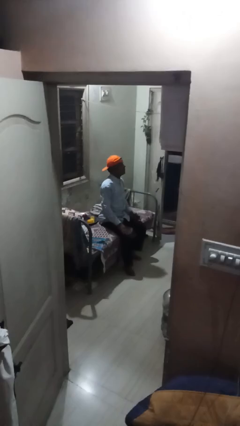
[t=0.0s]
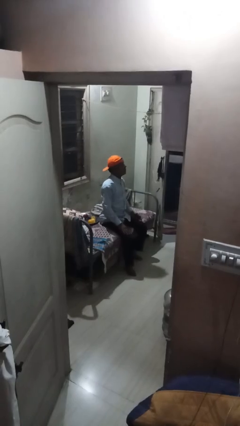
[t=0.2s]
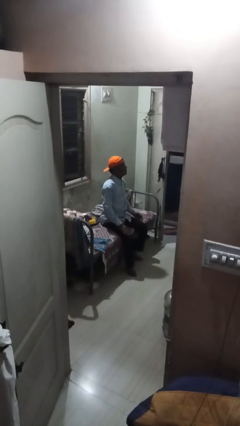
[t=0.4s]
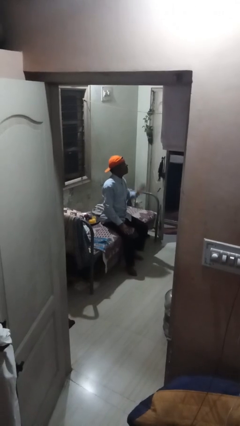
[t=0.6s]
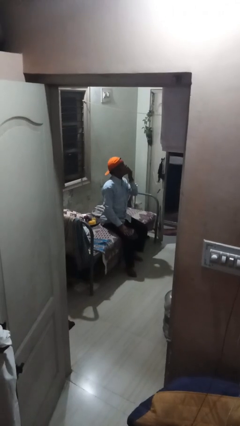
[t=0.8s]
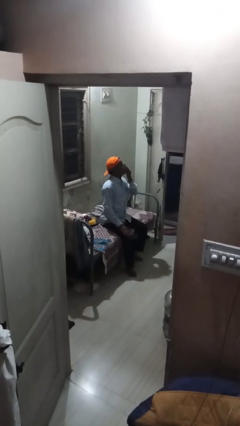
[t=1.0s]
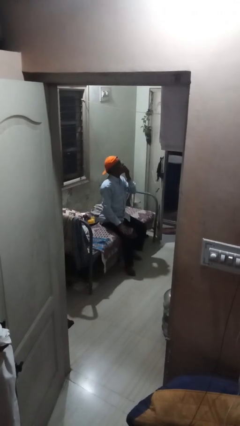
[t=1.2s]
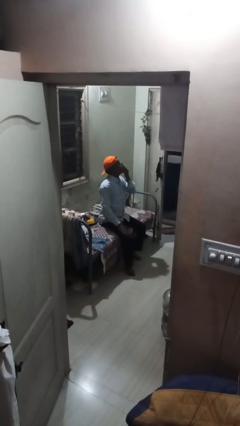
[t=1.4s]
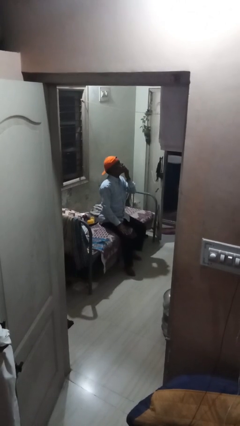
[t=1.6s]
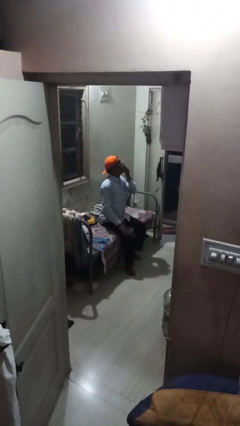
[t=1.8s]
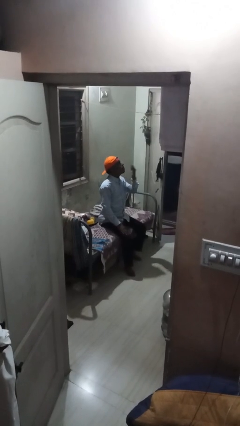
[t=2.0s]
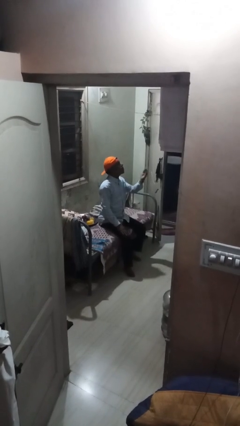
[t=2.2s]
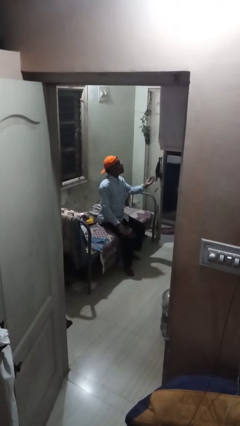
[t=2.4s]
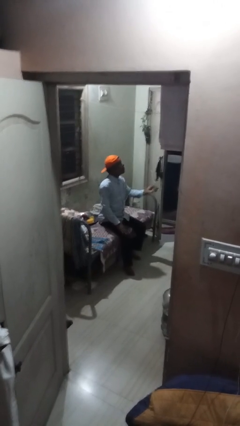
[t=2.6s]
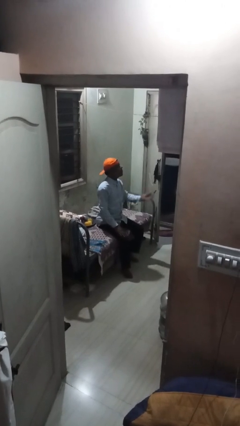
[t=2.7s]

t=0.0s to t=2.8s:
person gestures blow kiss

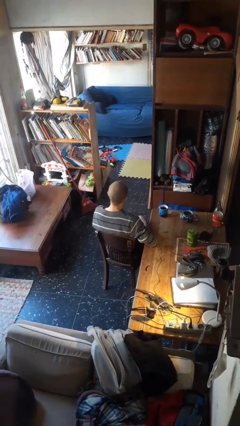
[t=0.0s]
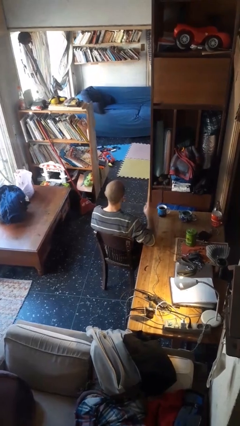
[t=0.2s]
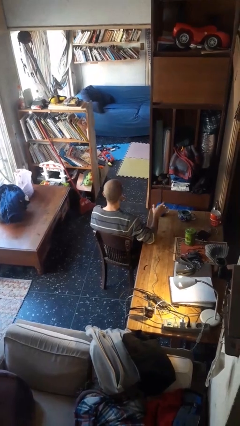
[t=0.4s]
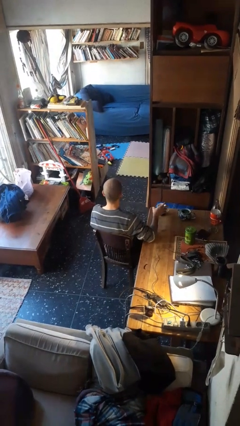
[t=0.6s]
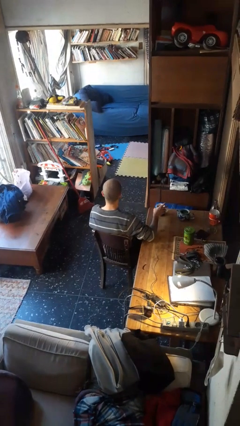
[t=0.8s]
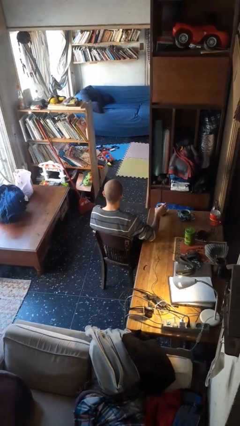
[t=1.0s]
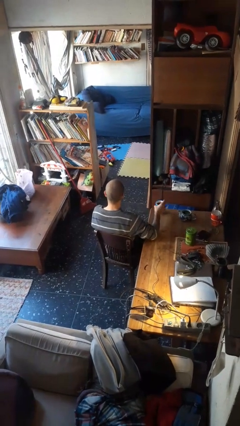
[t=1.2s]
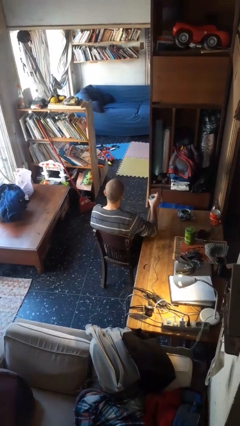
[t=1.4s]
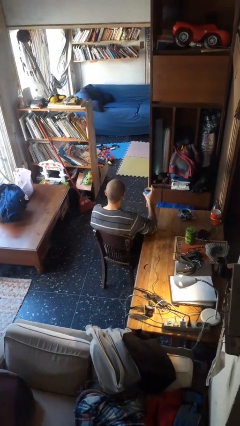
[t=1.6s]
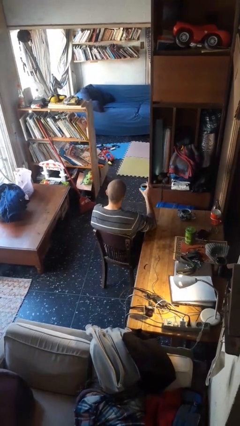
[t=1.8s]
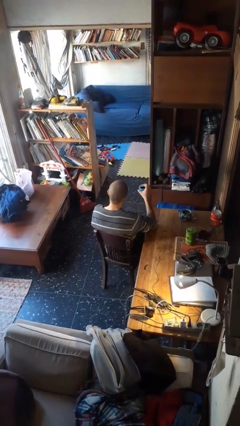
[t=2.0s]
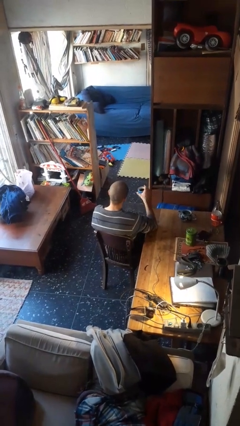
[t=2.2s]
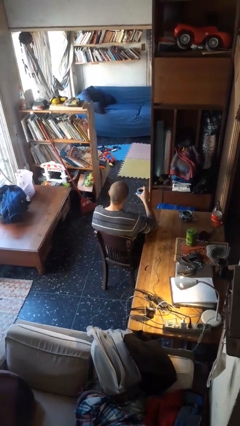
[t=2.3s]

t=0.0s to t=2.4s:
person picks up object from table

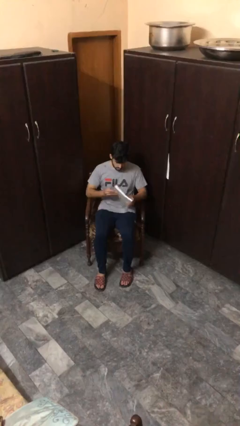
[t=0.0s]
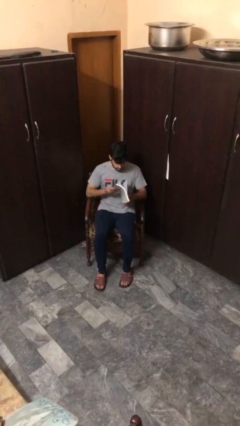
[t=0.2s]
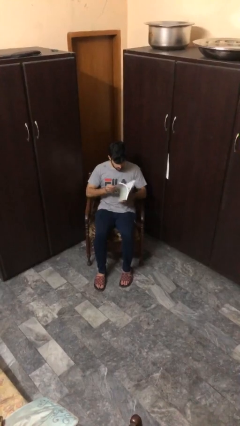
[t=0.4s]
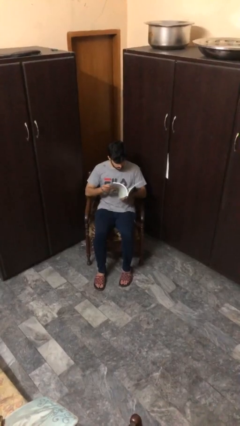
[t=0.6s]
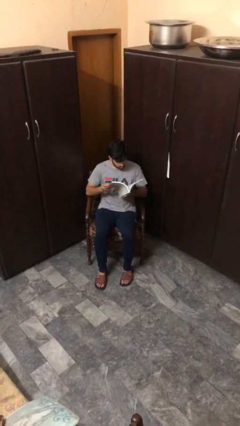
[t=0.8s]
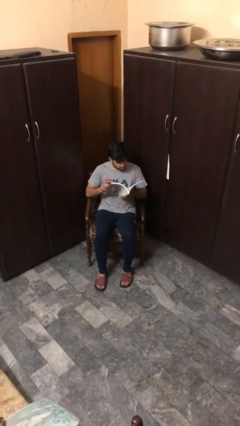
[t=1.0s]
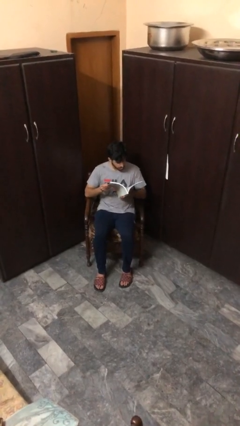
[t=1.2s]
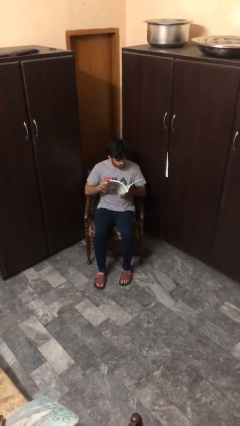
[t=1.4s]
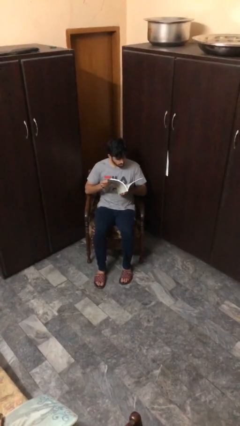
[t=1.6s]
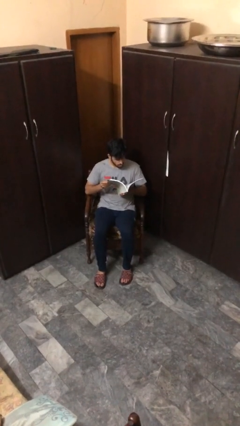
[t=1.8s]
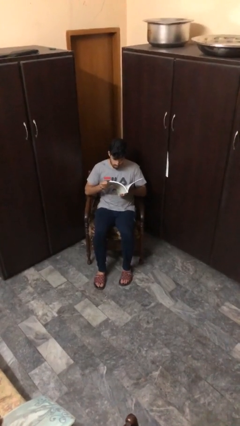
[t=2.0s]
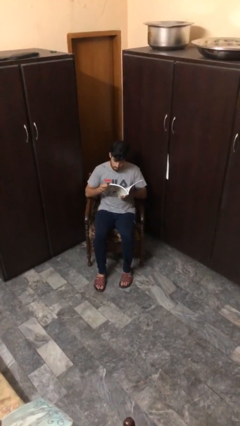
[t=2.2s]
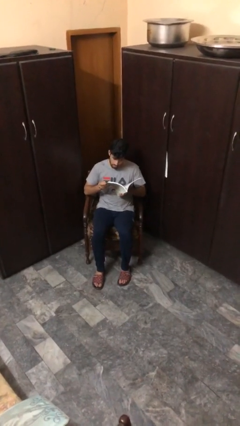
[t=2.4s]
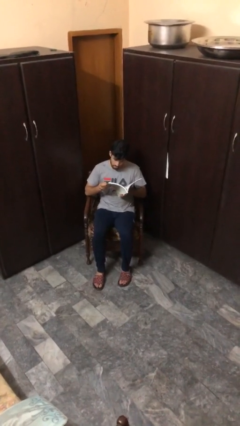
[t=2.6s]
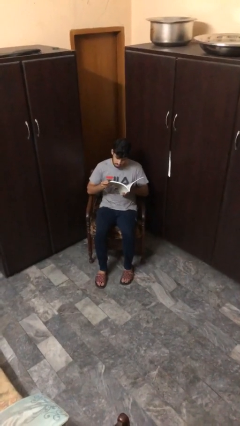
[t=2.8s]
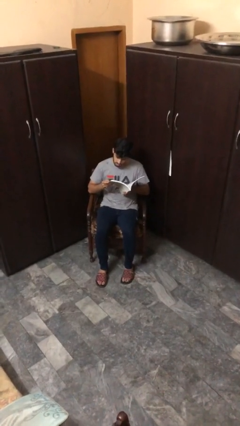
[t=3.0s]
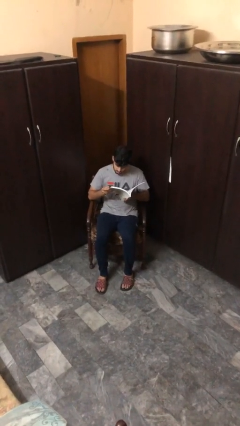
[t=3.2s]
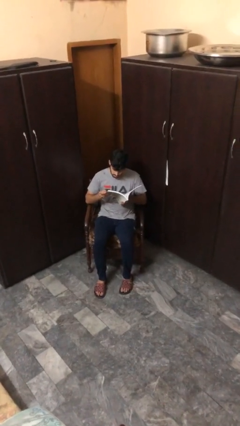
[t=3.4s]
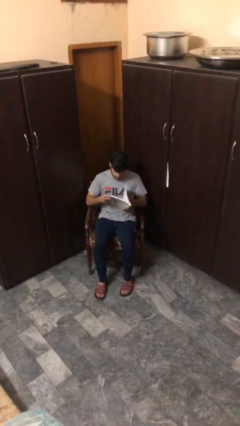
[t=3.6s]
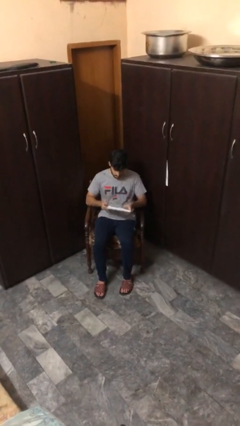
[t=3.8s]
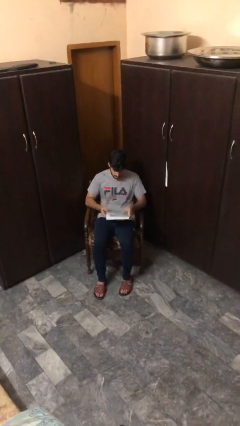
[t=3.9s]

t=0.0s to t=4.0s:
person reads book

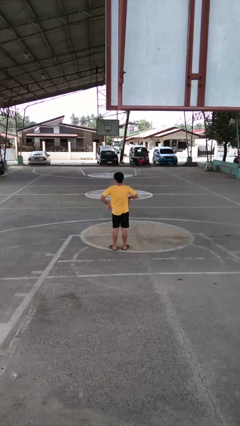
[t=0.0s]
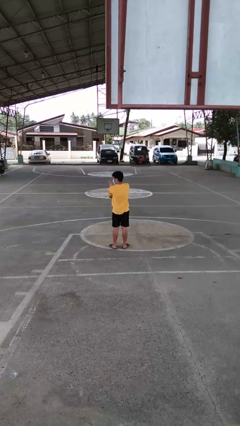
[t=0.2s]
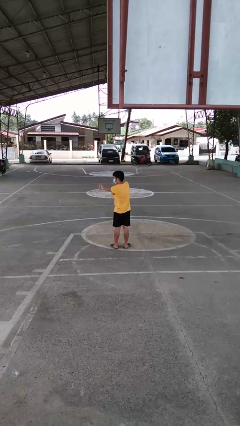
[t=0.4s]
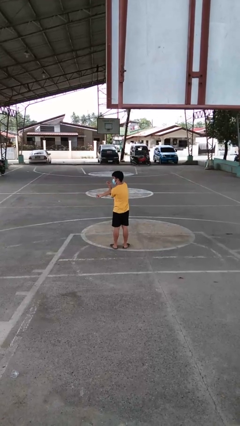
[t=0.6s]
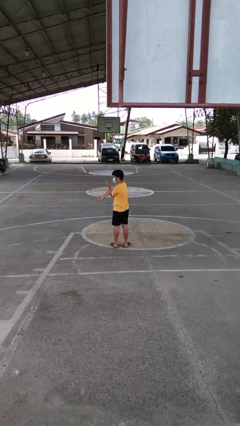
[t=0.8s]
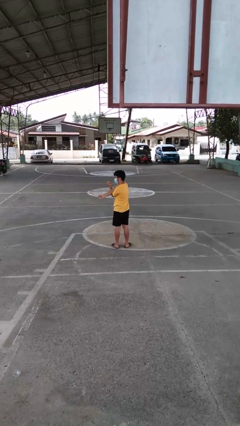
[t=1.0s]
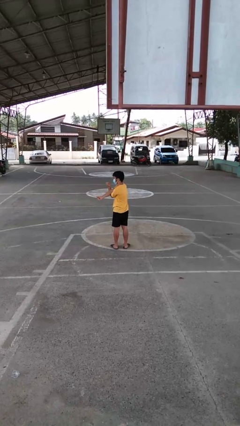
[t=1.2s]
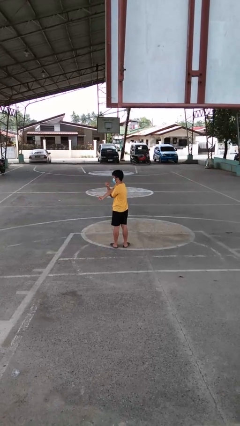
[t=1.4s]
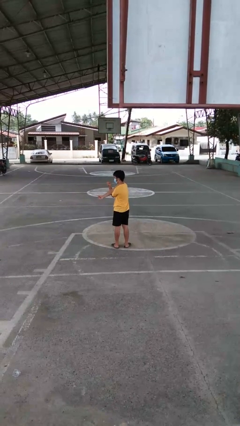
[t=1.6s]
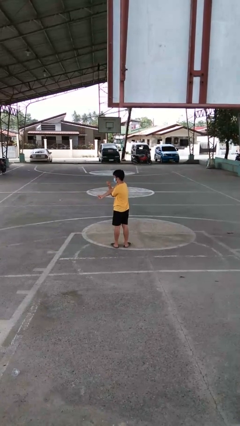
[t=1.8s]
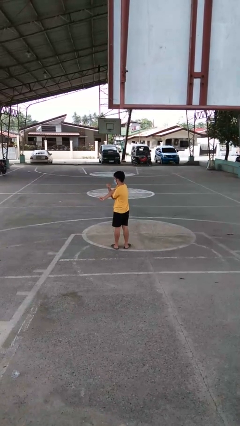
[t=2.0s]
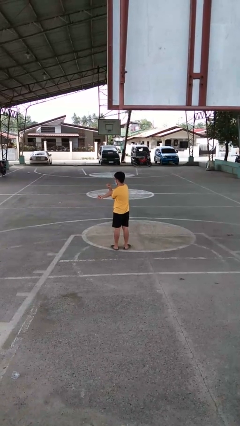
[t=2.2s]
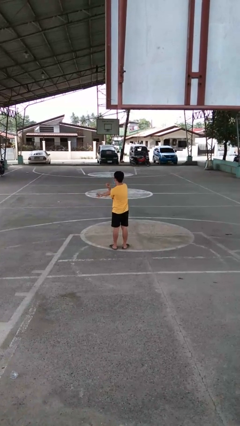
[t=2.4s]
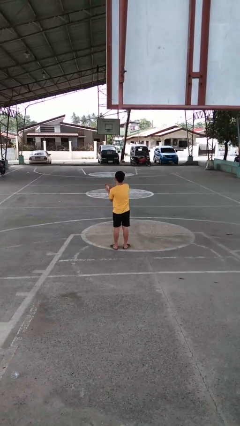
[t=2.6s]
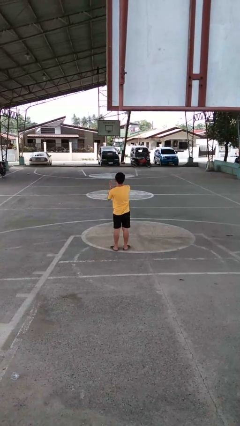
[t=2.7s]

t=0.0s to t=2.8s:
person stretches arms to side

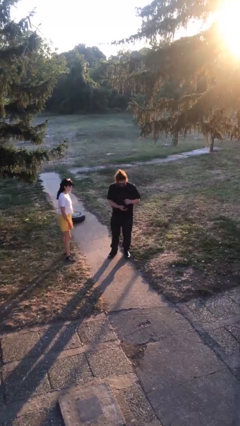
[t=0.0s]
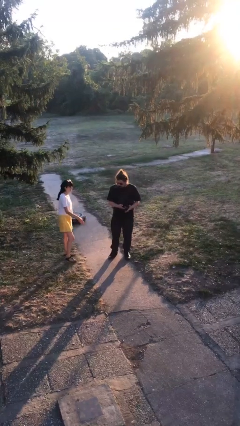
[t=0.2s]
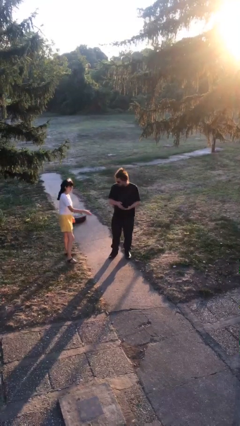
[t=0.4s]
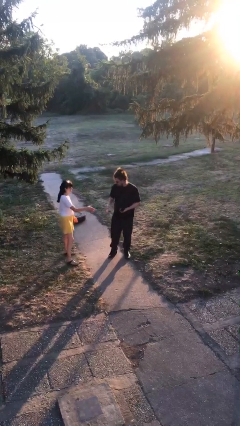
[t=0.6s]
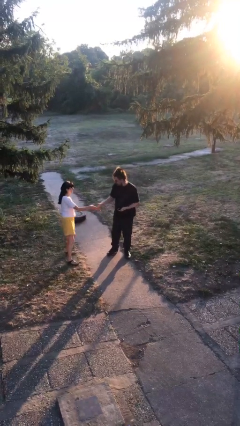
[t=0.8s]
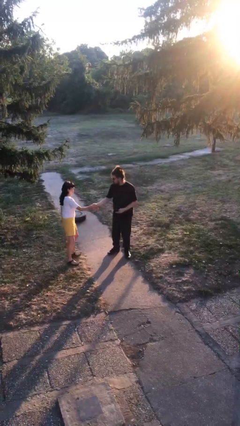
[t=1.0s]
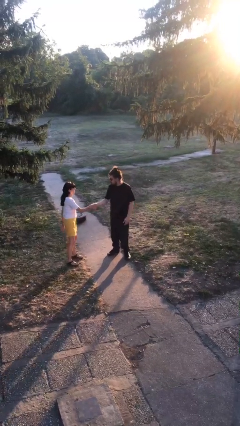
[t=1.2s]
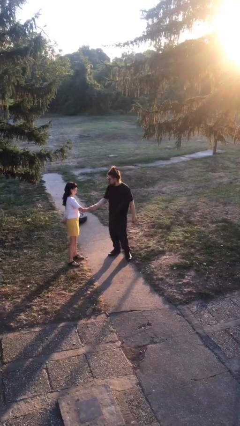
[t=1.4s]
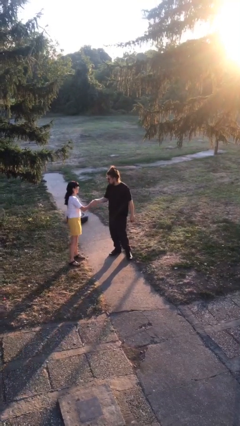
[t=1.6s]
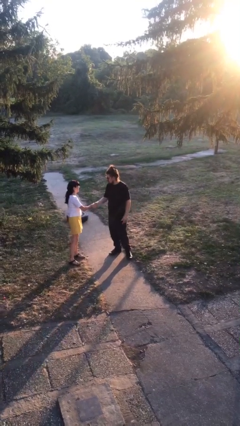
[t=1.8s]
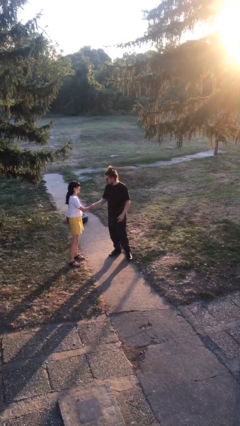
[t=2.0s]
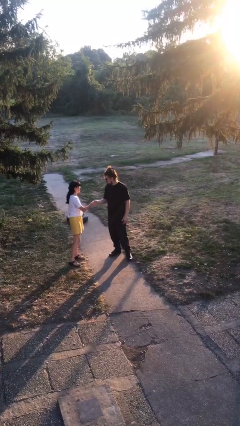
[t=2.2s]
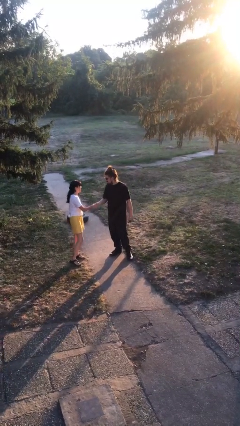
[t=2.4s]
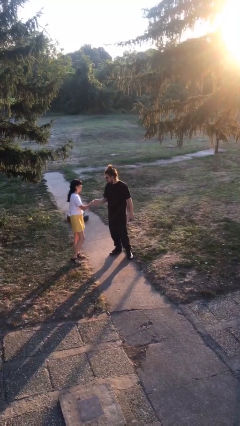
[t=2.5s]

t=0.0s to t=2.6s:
person shakes hand

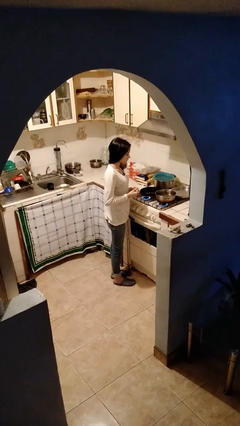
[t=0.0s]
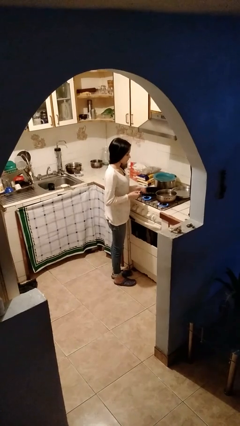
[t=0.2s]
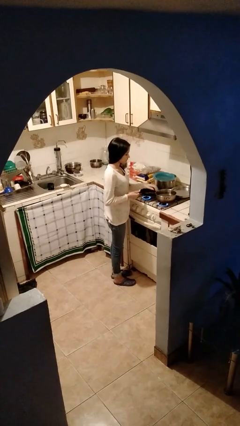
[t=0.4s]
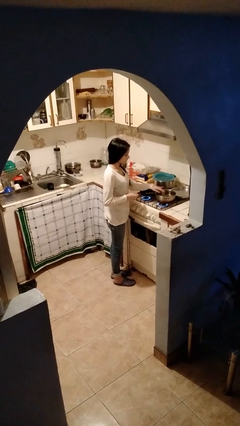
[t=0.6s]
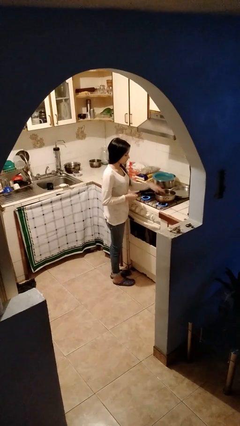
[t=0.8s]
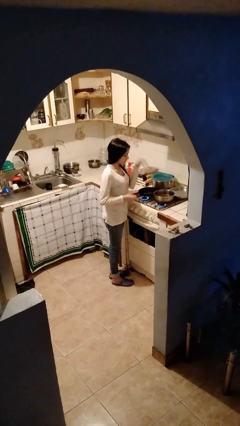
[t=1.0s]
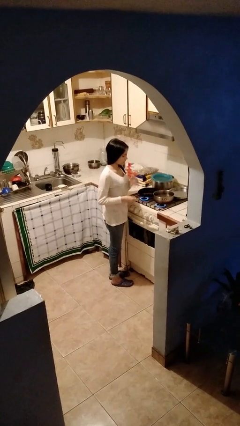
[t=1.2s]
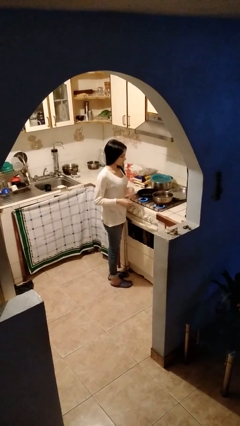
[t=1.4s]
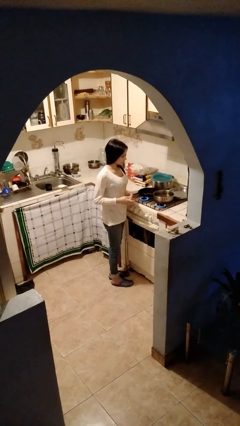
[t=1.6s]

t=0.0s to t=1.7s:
person burns hand

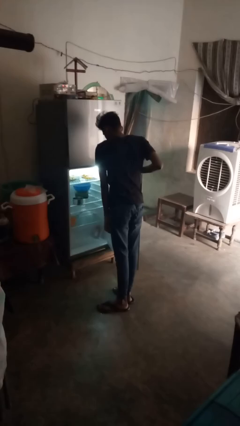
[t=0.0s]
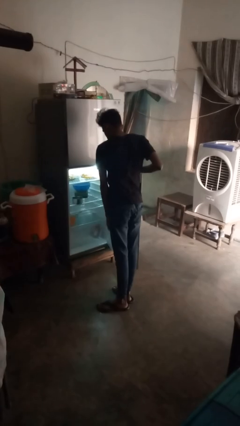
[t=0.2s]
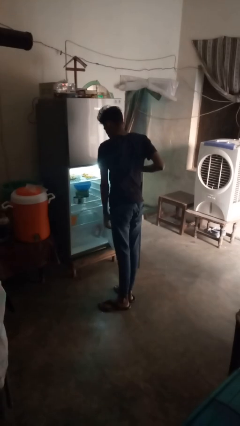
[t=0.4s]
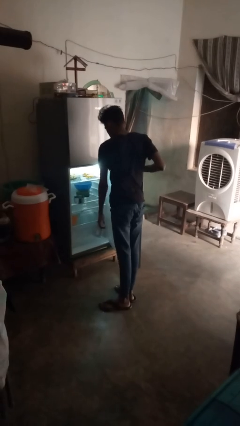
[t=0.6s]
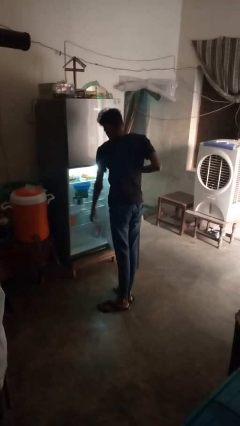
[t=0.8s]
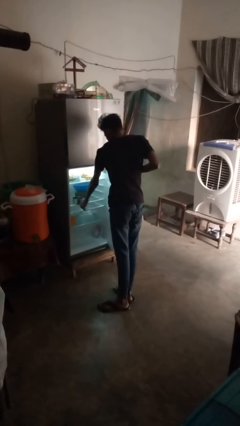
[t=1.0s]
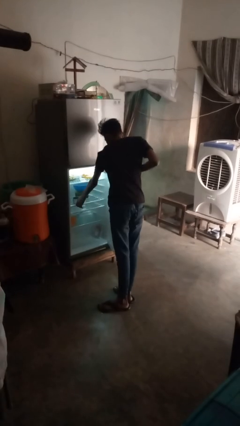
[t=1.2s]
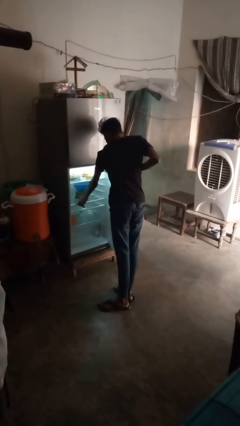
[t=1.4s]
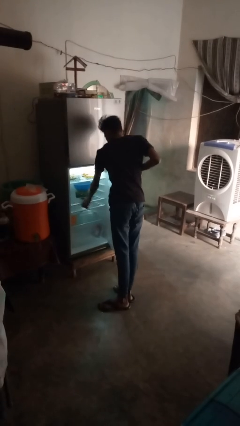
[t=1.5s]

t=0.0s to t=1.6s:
person takes object from refrigerator
